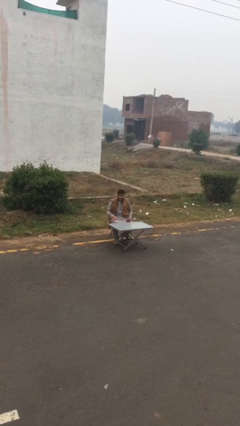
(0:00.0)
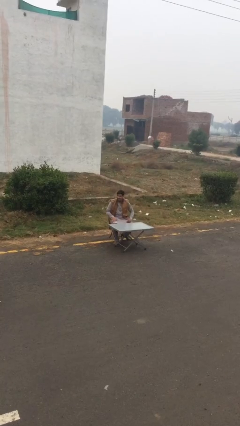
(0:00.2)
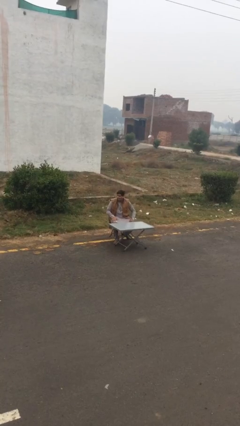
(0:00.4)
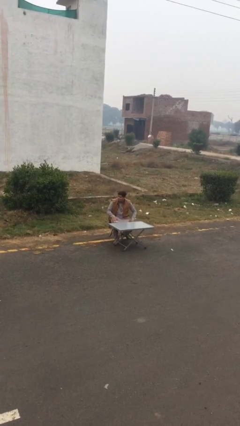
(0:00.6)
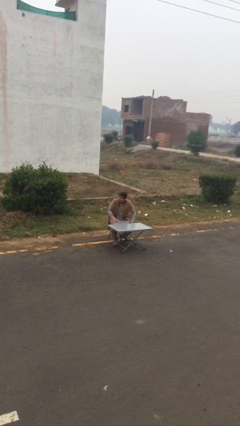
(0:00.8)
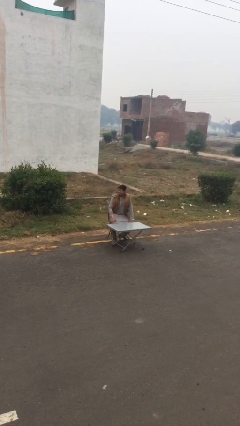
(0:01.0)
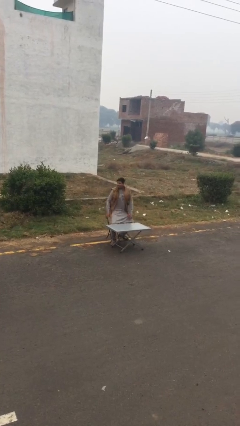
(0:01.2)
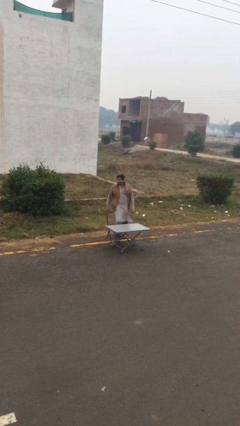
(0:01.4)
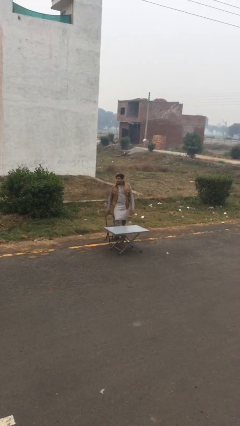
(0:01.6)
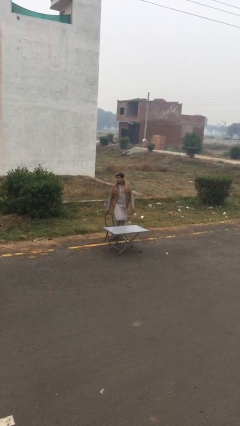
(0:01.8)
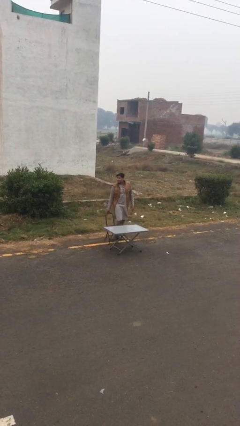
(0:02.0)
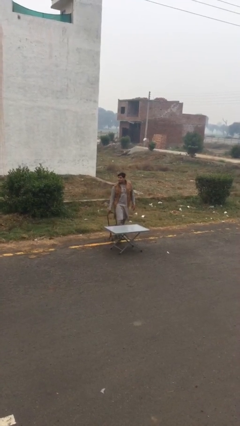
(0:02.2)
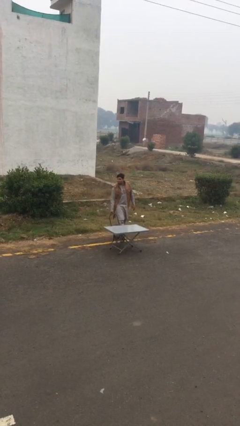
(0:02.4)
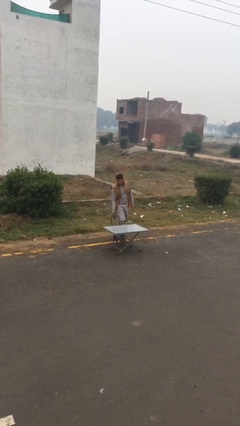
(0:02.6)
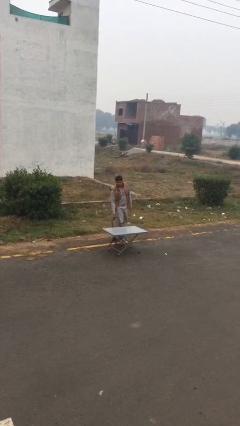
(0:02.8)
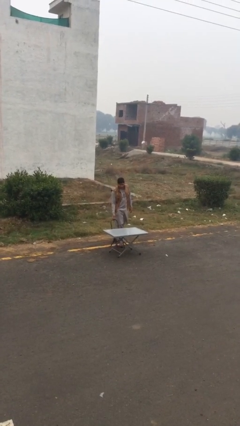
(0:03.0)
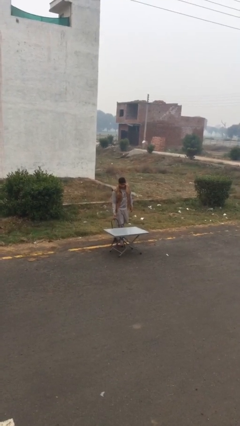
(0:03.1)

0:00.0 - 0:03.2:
person stands up

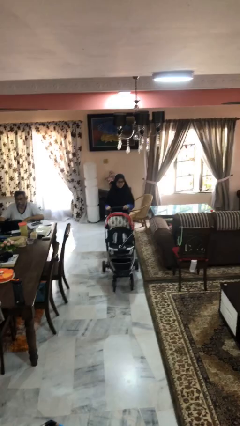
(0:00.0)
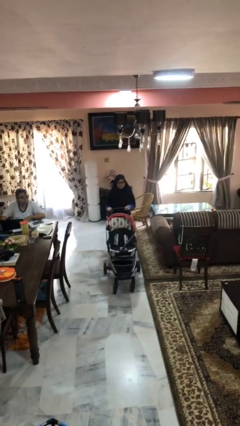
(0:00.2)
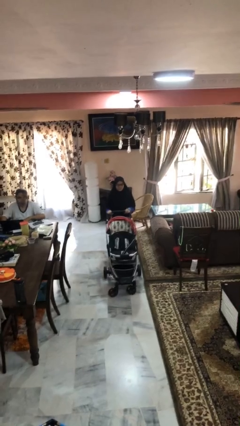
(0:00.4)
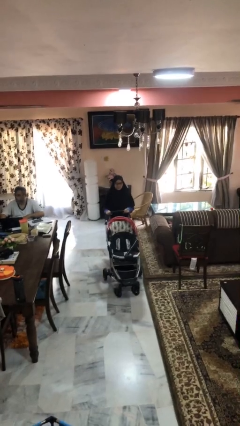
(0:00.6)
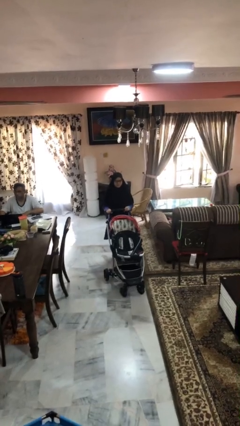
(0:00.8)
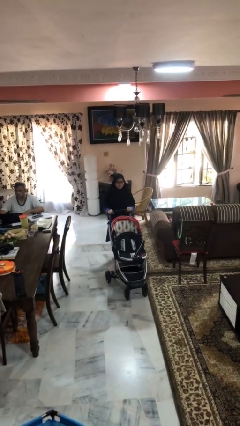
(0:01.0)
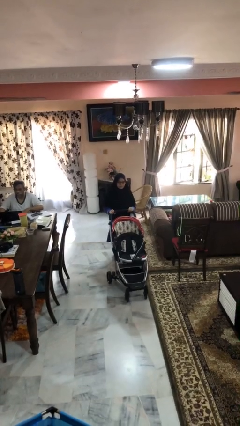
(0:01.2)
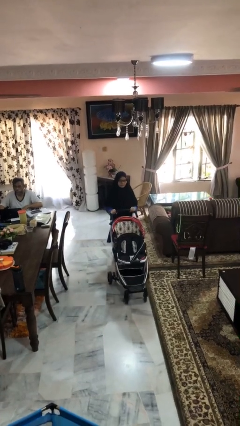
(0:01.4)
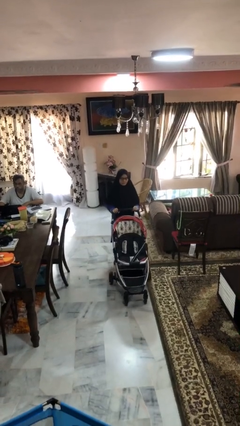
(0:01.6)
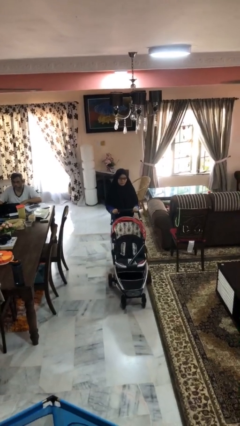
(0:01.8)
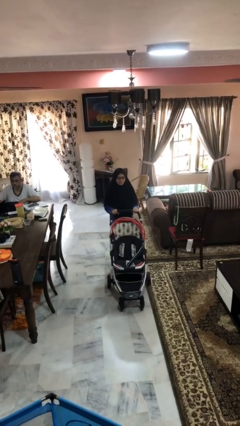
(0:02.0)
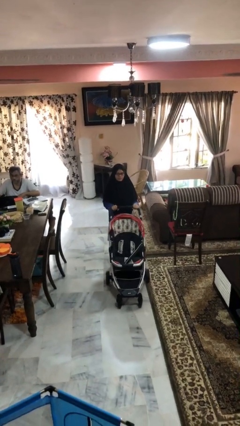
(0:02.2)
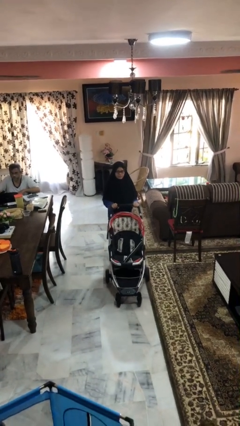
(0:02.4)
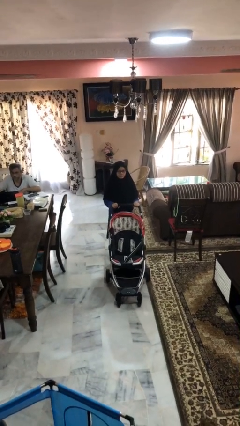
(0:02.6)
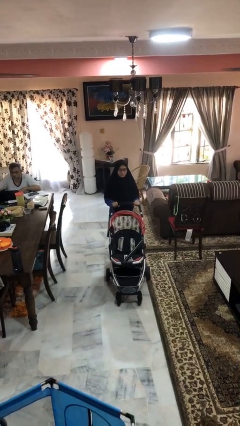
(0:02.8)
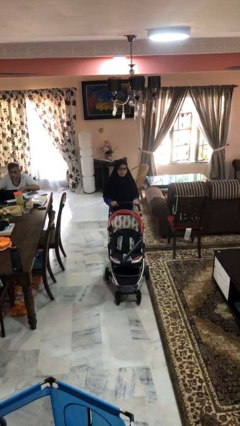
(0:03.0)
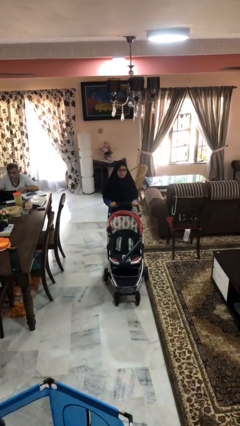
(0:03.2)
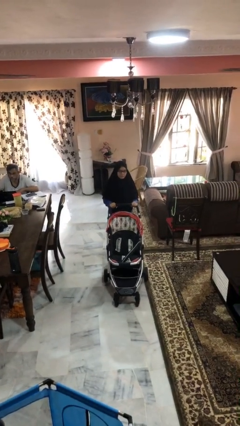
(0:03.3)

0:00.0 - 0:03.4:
person pushes wheeled cart

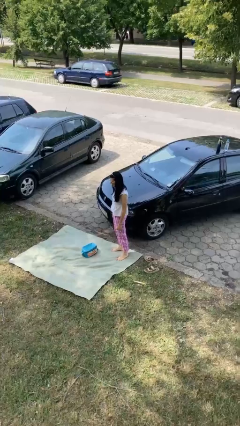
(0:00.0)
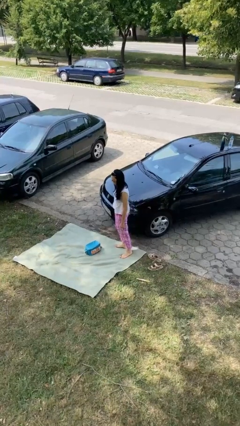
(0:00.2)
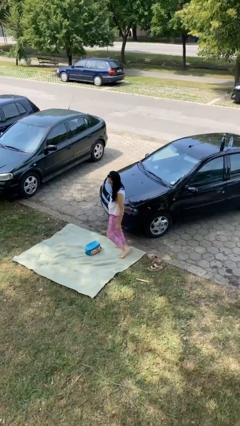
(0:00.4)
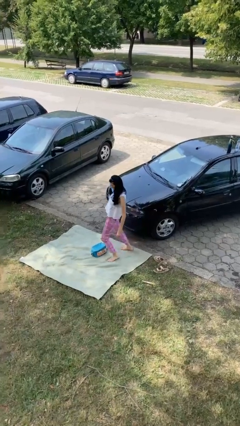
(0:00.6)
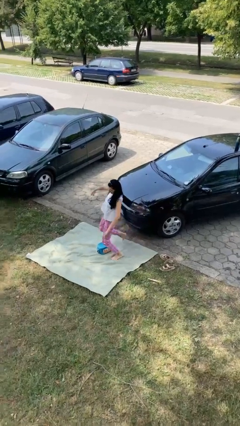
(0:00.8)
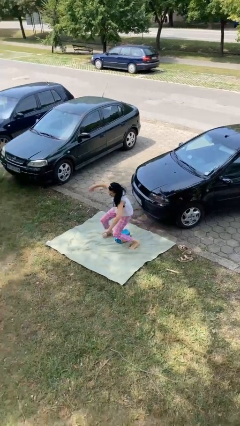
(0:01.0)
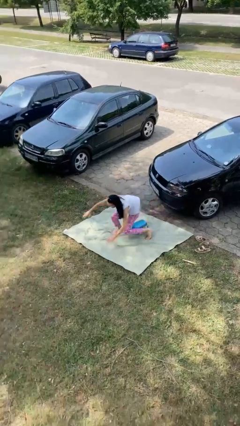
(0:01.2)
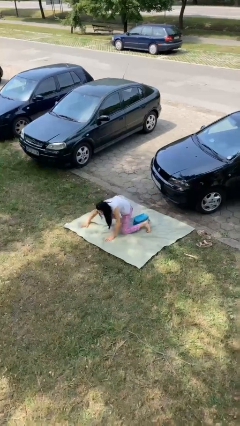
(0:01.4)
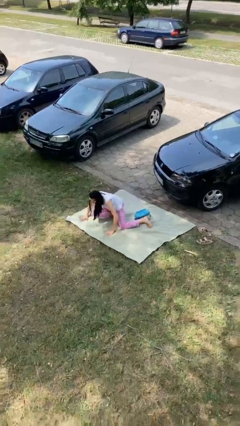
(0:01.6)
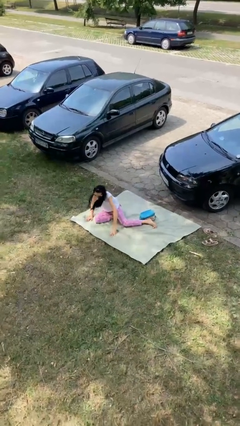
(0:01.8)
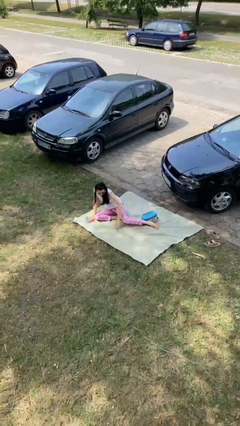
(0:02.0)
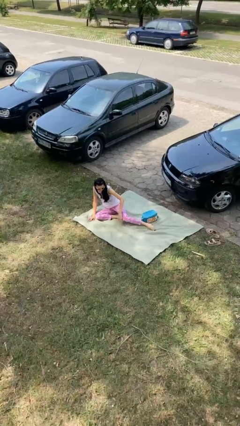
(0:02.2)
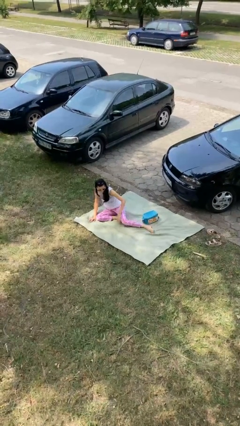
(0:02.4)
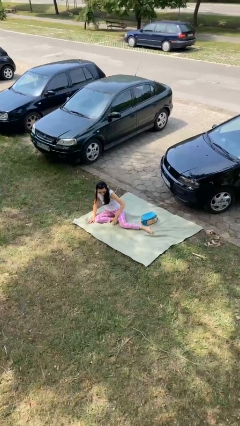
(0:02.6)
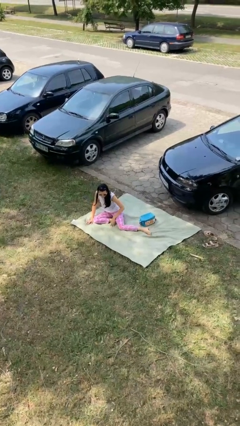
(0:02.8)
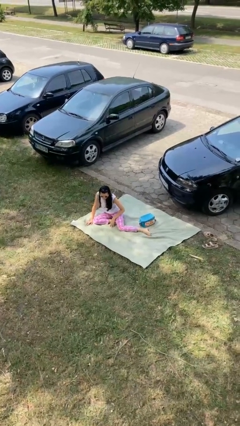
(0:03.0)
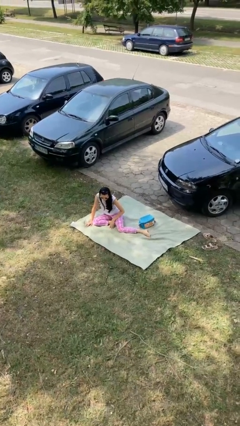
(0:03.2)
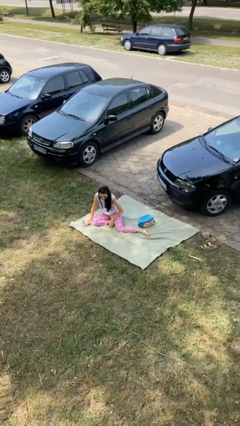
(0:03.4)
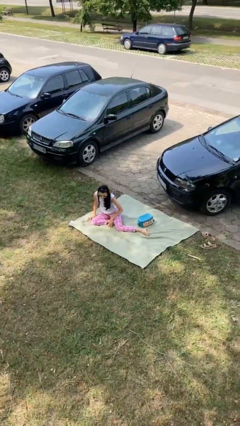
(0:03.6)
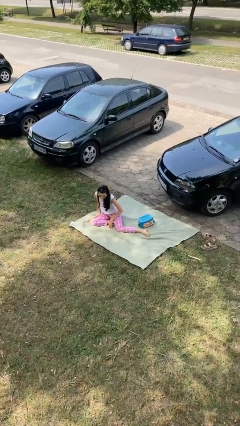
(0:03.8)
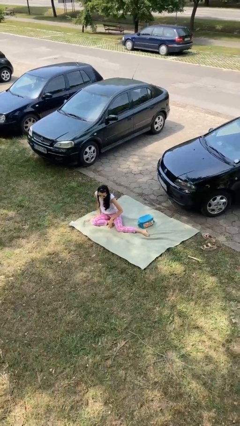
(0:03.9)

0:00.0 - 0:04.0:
person trips on object on floor

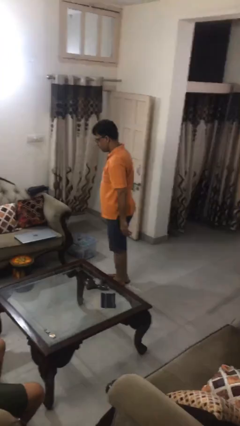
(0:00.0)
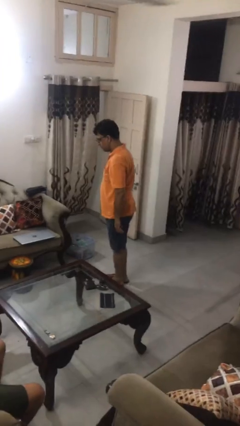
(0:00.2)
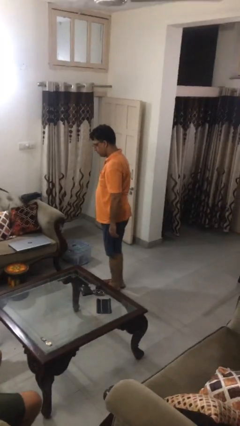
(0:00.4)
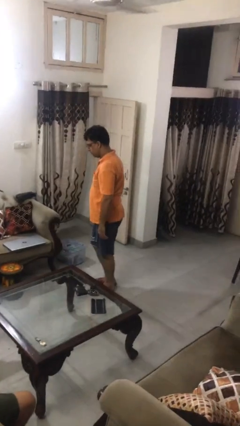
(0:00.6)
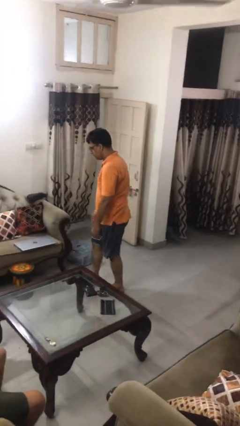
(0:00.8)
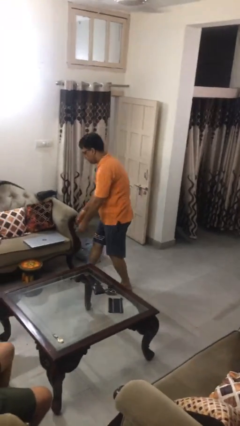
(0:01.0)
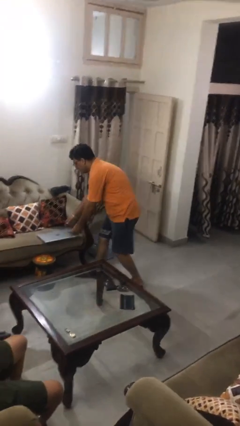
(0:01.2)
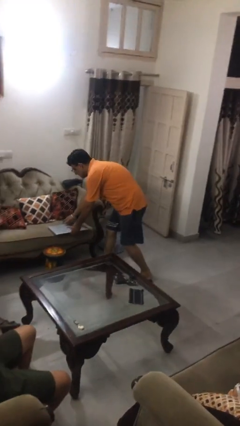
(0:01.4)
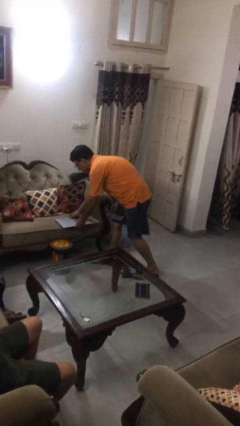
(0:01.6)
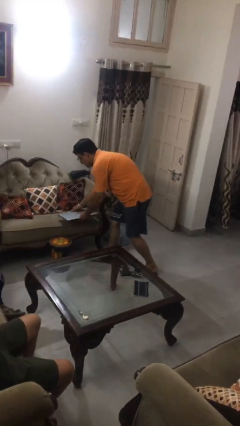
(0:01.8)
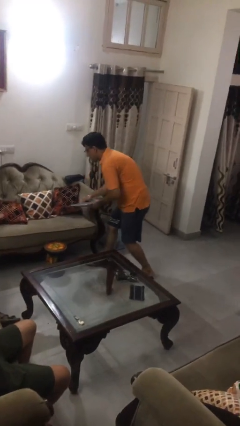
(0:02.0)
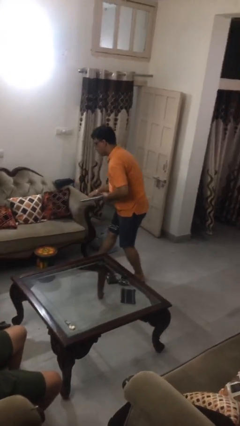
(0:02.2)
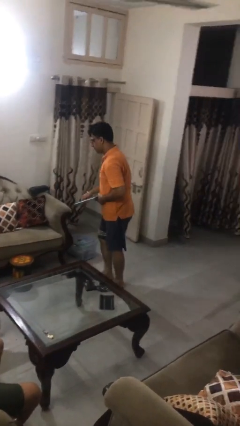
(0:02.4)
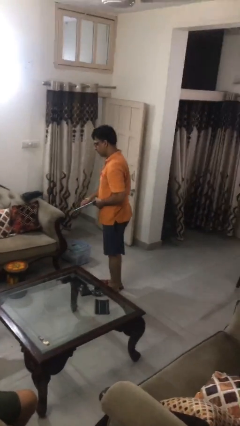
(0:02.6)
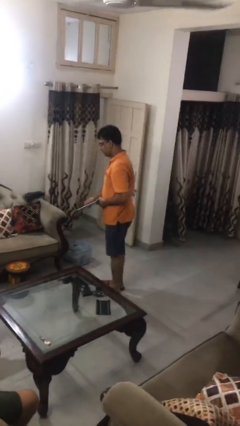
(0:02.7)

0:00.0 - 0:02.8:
person picks up object from couch

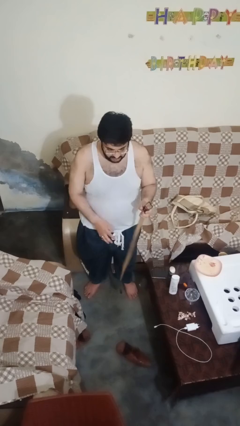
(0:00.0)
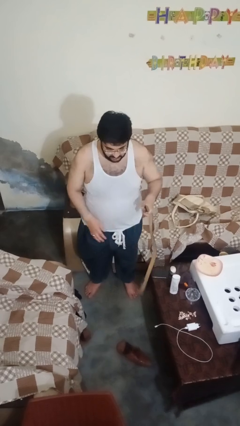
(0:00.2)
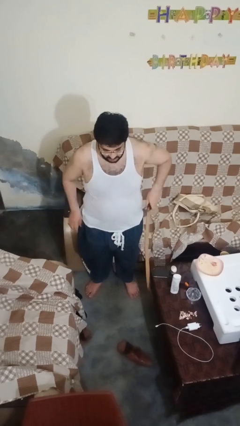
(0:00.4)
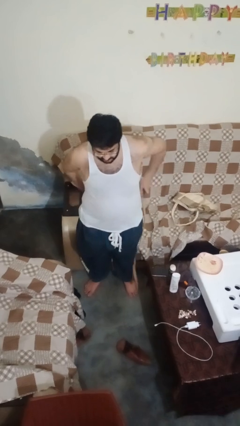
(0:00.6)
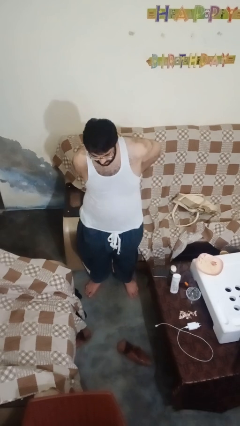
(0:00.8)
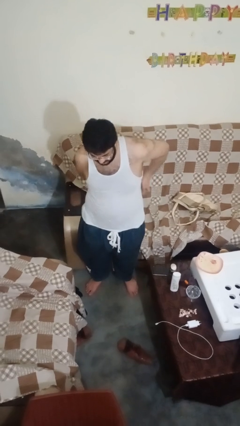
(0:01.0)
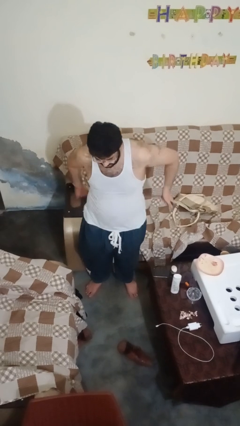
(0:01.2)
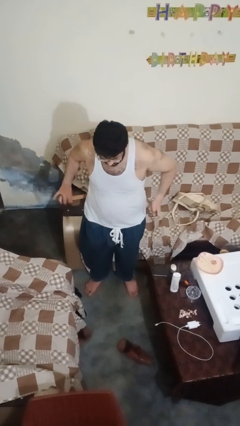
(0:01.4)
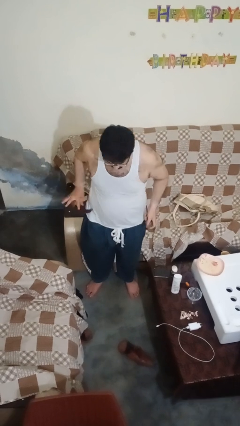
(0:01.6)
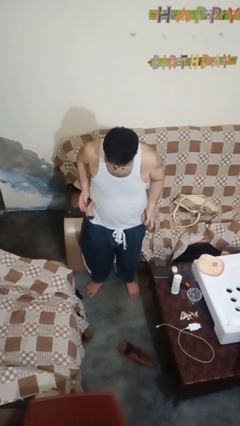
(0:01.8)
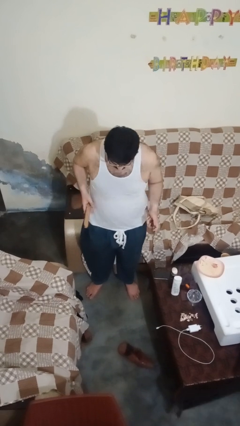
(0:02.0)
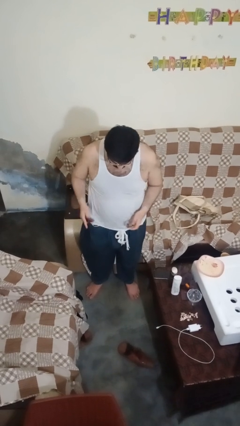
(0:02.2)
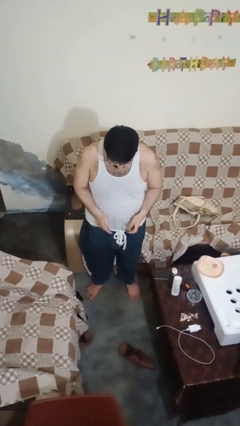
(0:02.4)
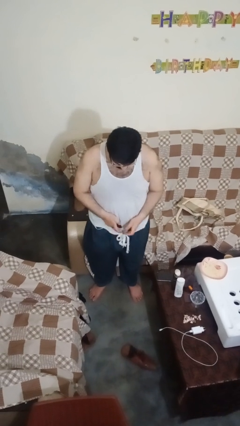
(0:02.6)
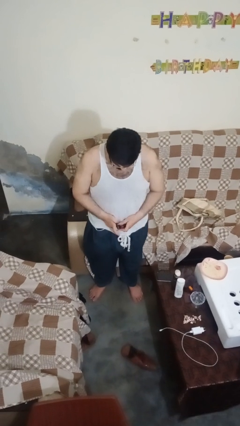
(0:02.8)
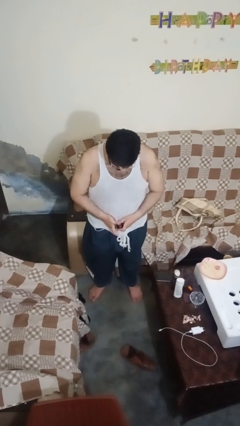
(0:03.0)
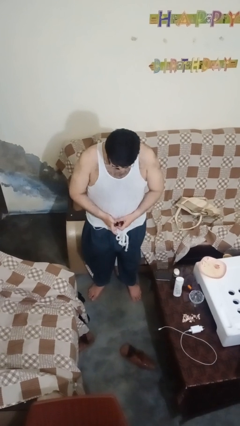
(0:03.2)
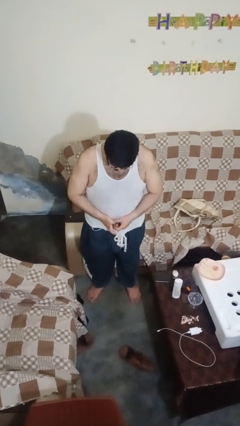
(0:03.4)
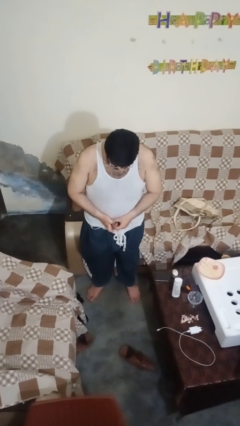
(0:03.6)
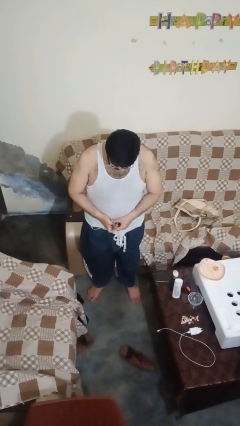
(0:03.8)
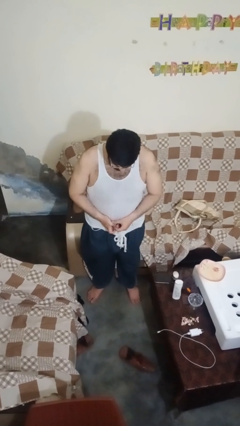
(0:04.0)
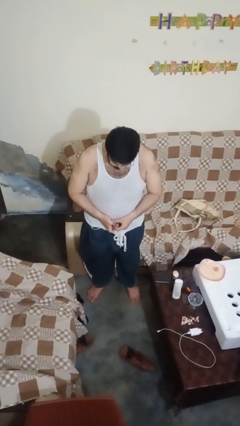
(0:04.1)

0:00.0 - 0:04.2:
person puts on belt

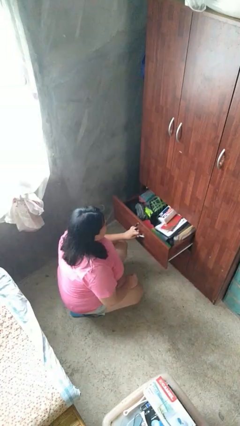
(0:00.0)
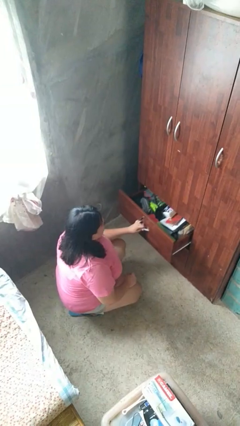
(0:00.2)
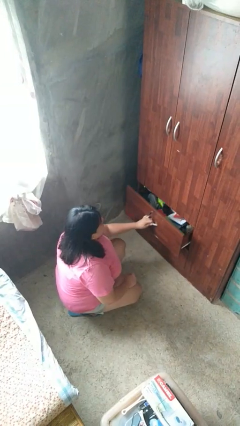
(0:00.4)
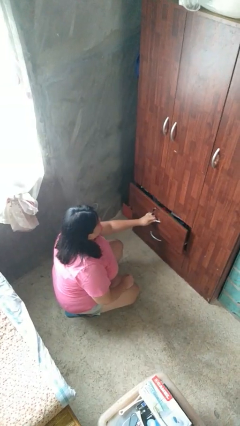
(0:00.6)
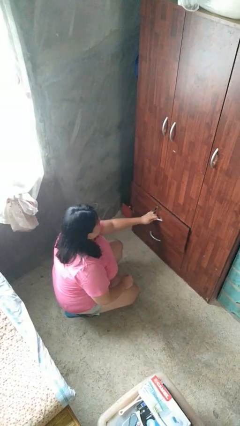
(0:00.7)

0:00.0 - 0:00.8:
person closes dresser drawer
